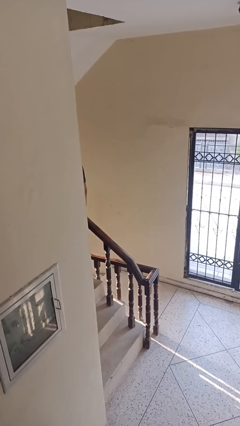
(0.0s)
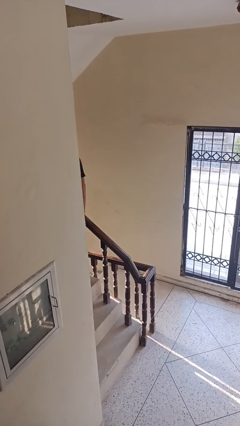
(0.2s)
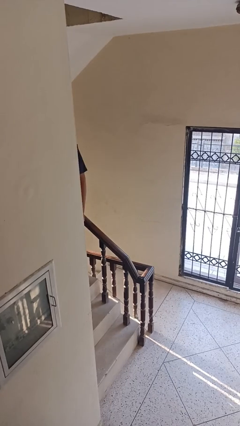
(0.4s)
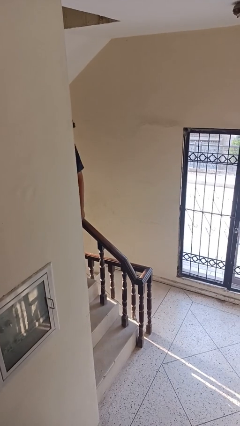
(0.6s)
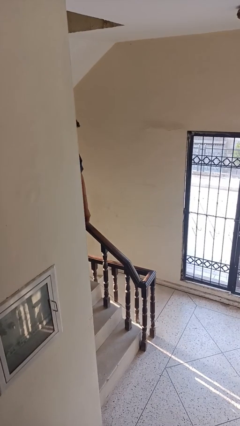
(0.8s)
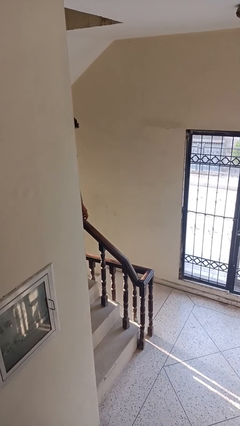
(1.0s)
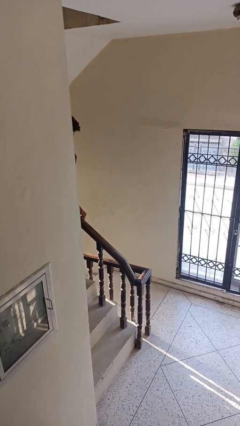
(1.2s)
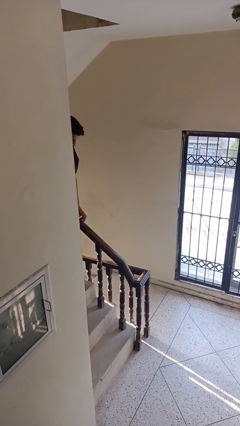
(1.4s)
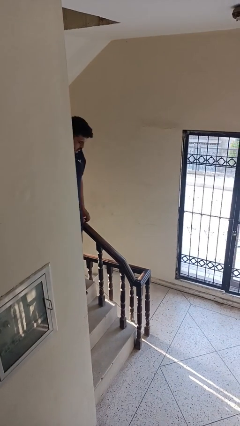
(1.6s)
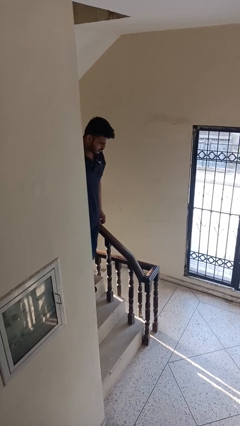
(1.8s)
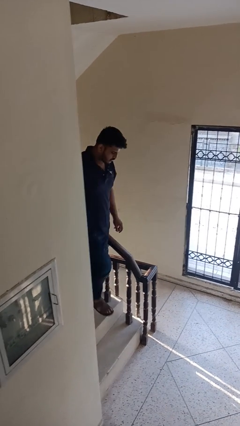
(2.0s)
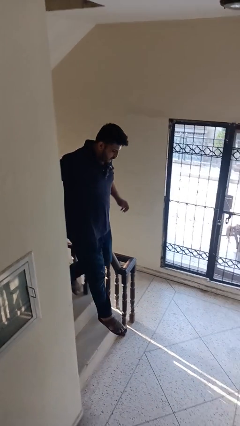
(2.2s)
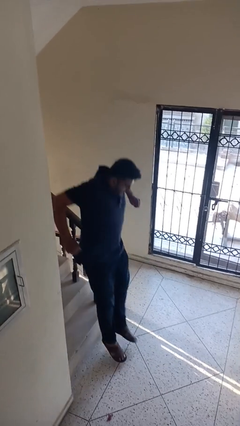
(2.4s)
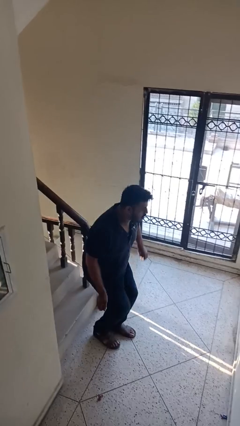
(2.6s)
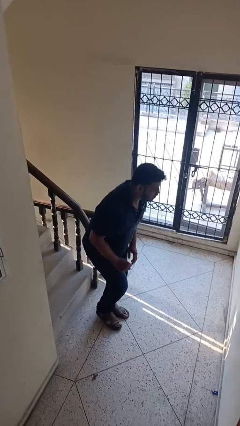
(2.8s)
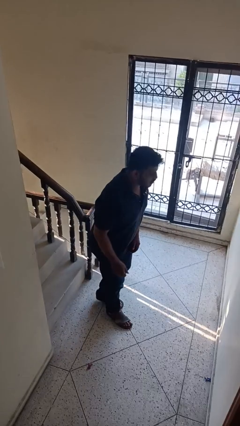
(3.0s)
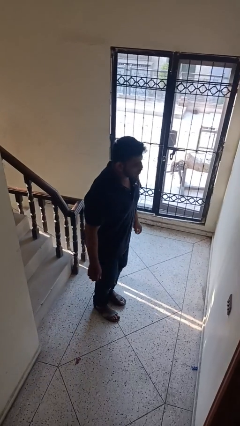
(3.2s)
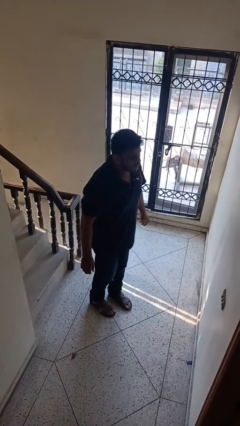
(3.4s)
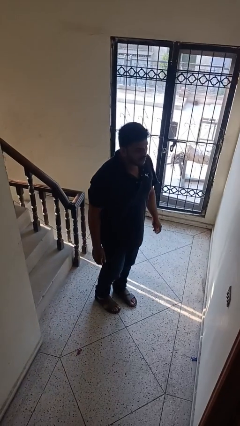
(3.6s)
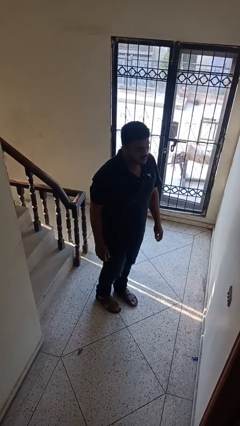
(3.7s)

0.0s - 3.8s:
person climbs down stairs

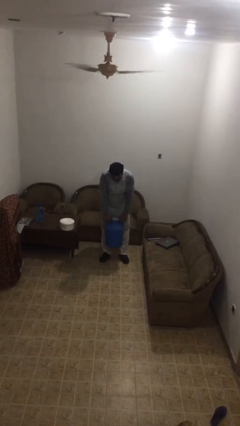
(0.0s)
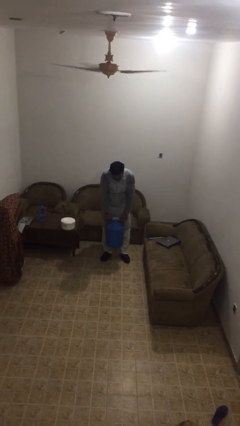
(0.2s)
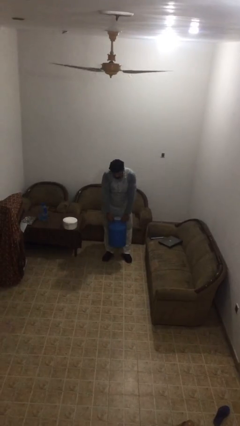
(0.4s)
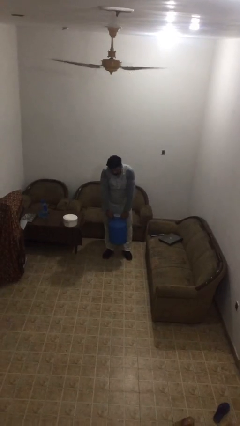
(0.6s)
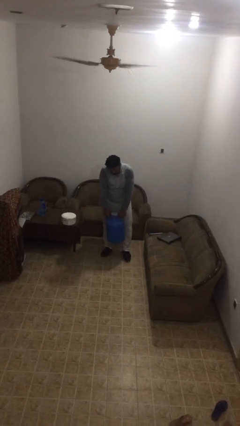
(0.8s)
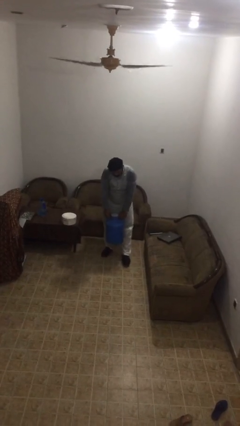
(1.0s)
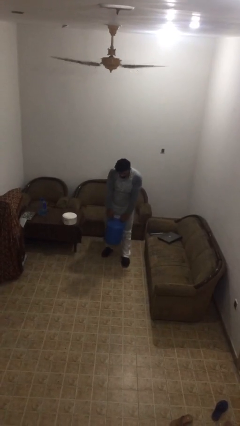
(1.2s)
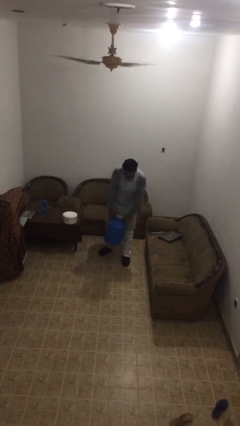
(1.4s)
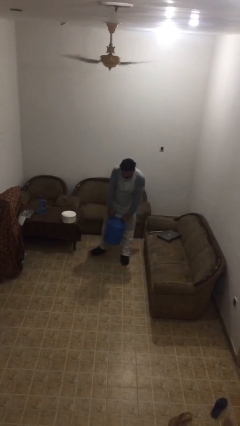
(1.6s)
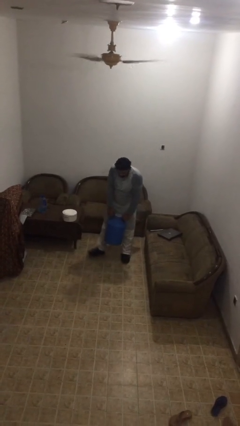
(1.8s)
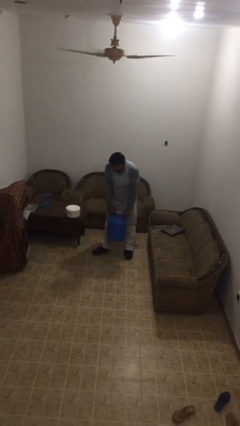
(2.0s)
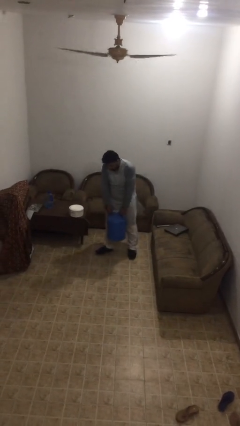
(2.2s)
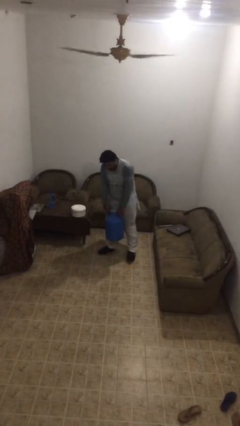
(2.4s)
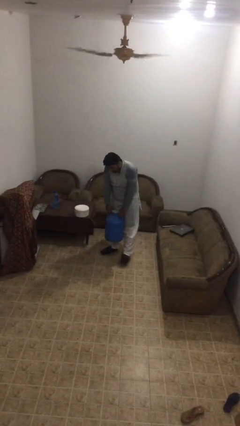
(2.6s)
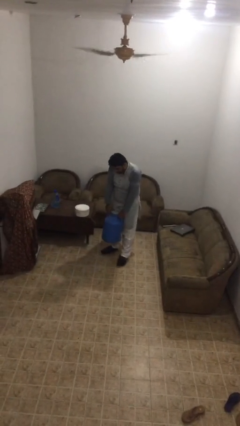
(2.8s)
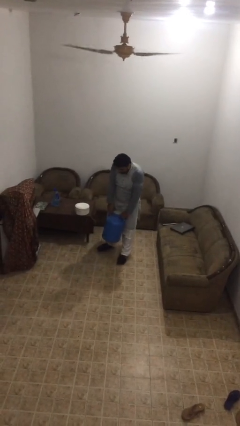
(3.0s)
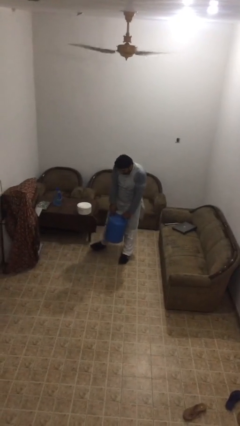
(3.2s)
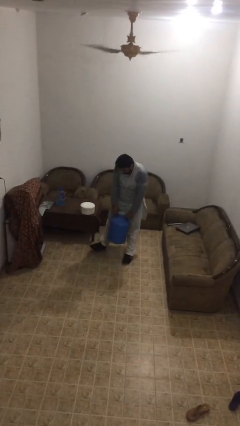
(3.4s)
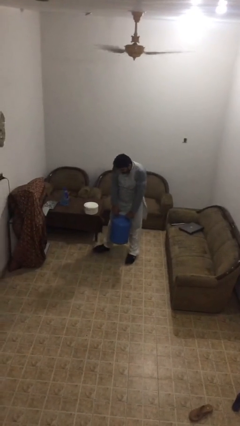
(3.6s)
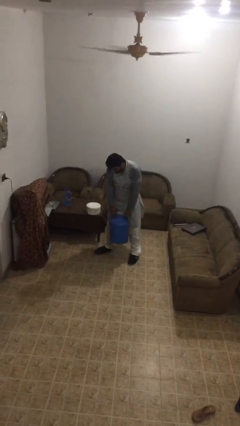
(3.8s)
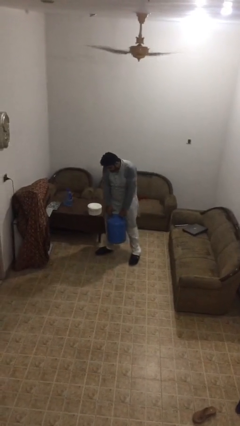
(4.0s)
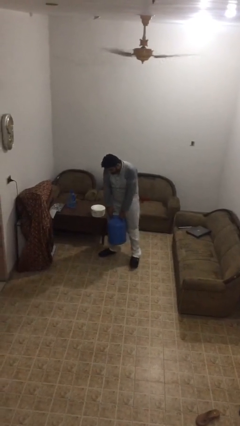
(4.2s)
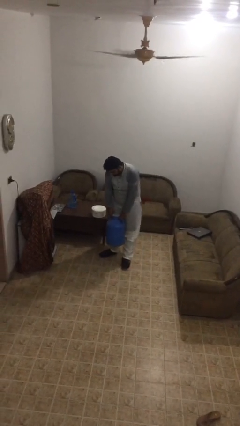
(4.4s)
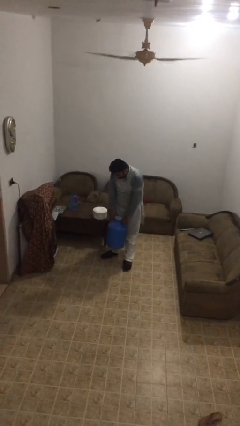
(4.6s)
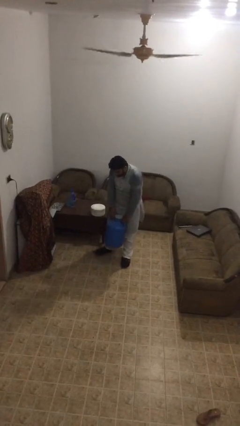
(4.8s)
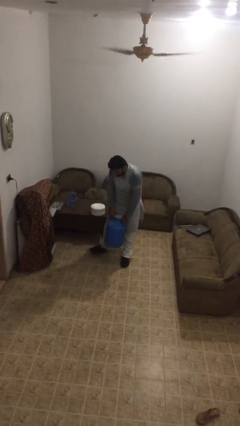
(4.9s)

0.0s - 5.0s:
person carries heavy object

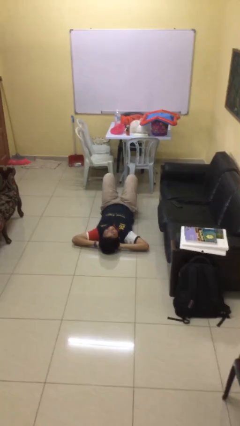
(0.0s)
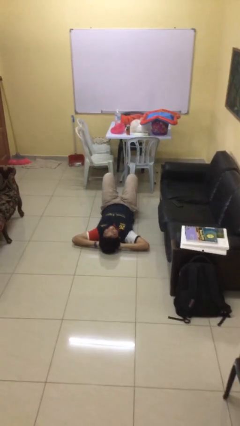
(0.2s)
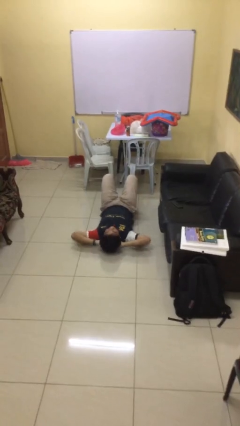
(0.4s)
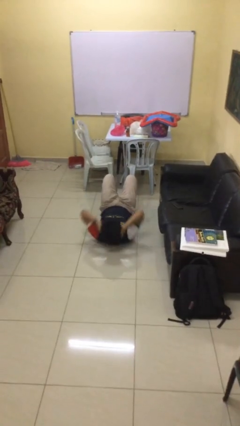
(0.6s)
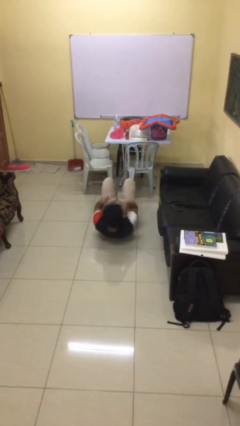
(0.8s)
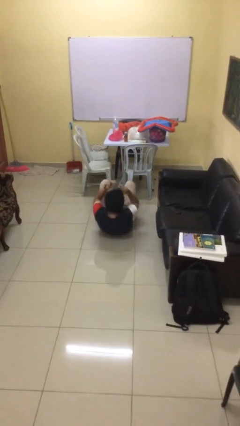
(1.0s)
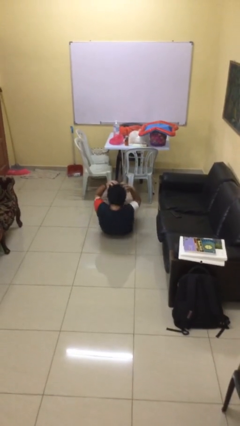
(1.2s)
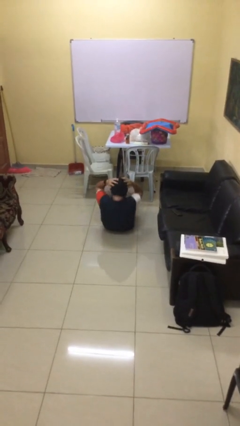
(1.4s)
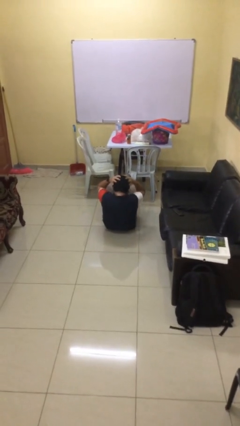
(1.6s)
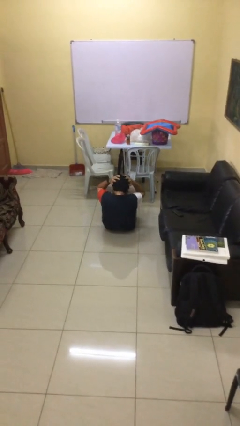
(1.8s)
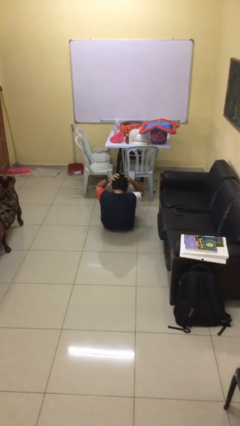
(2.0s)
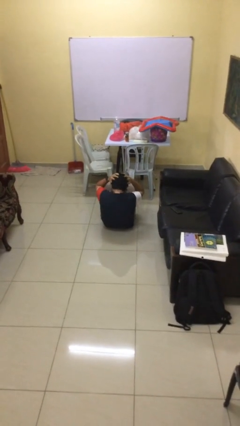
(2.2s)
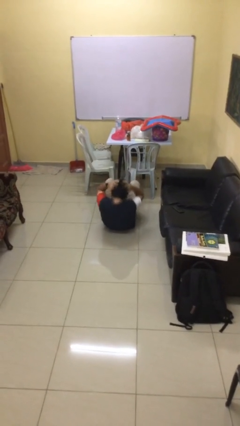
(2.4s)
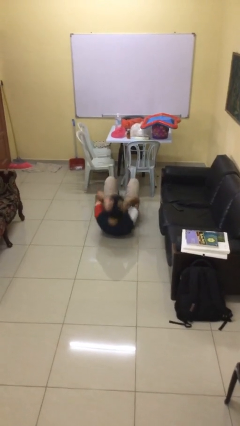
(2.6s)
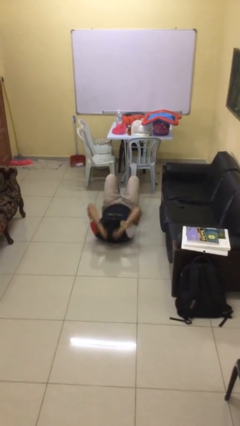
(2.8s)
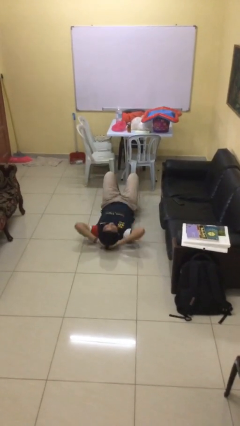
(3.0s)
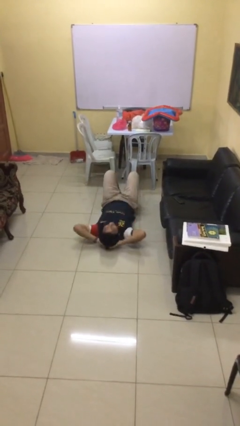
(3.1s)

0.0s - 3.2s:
person exercises with situp

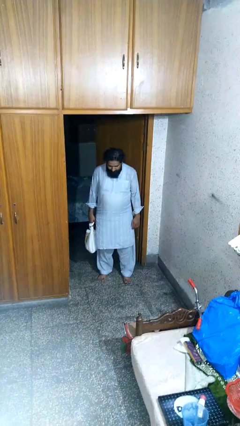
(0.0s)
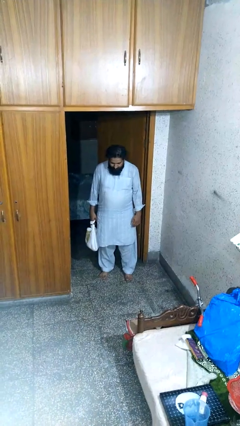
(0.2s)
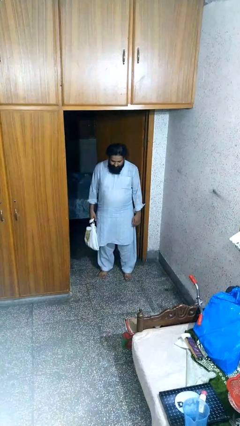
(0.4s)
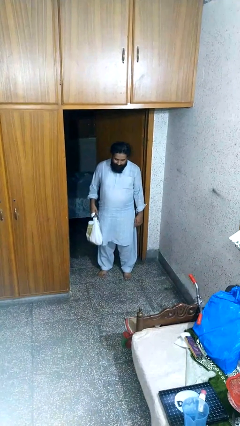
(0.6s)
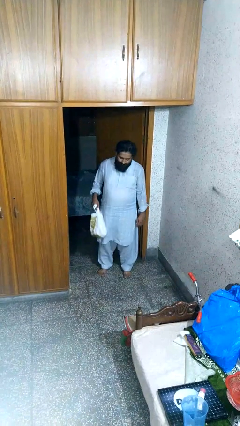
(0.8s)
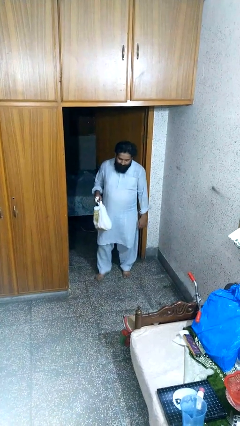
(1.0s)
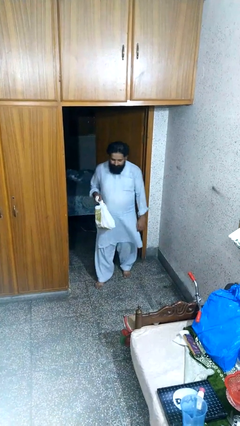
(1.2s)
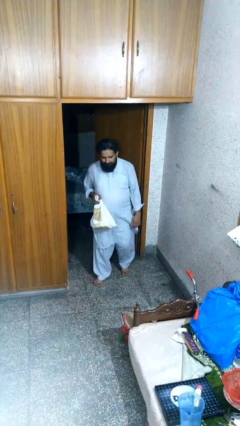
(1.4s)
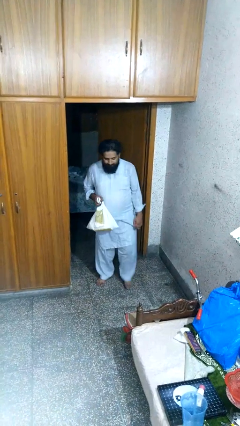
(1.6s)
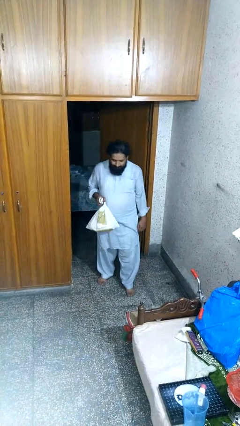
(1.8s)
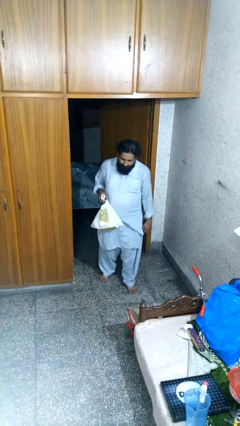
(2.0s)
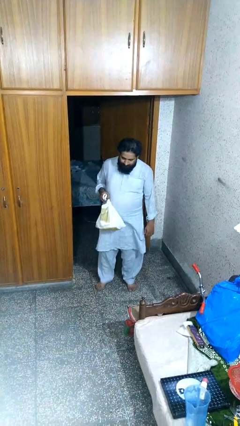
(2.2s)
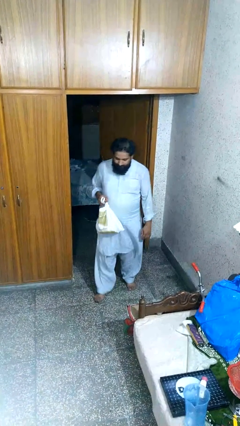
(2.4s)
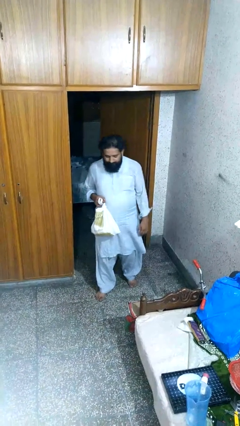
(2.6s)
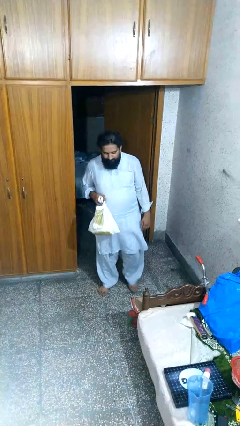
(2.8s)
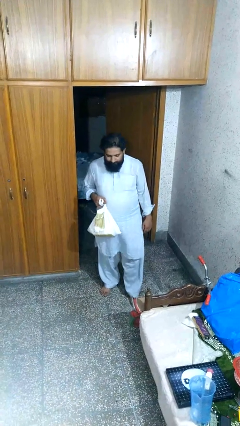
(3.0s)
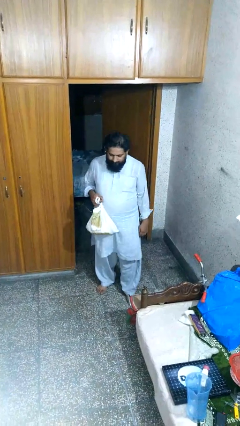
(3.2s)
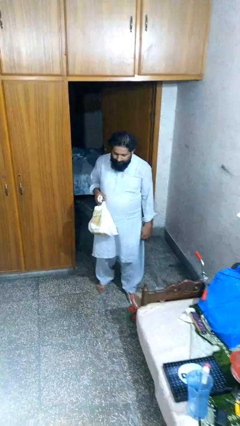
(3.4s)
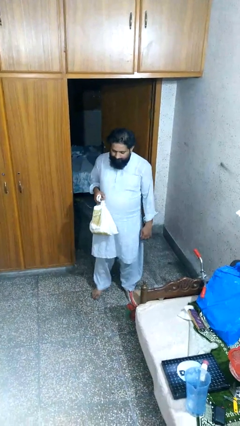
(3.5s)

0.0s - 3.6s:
person carries groceries

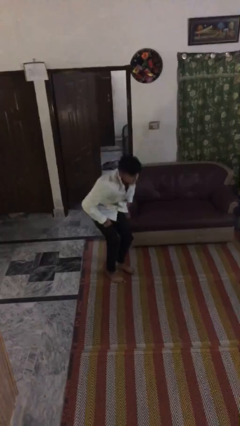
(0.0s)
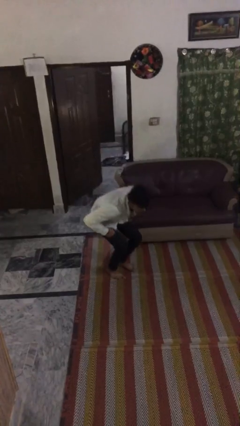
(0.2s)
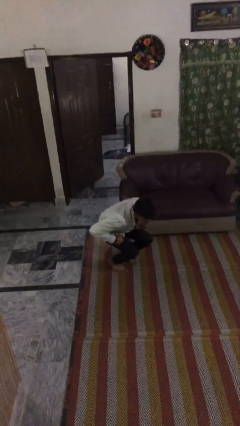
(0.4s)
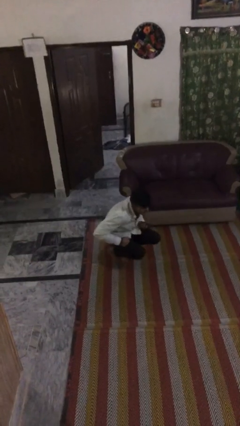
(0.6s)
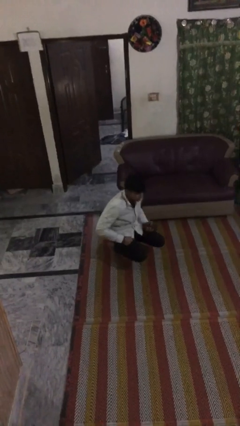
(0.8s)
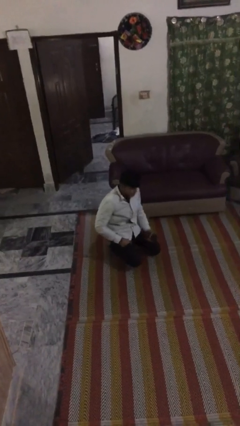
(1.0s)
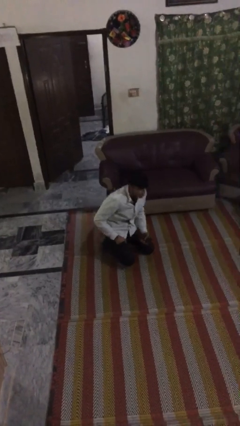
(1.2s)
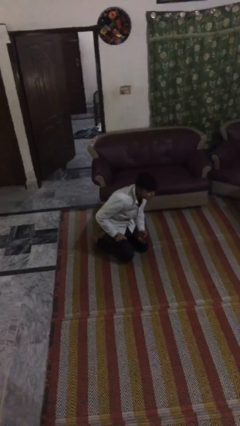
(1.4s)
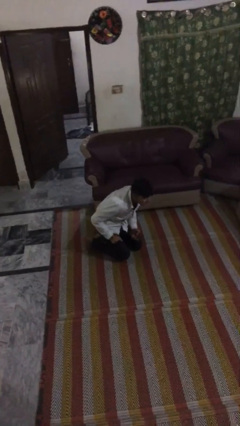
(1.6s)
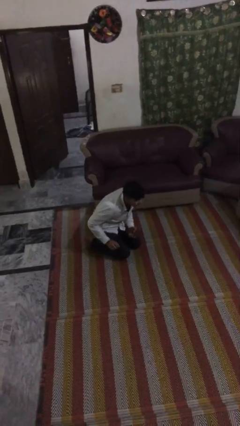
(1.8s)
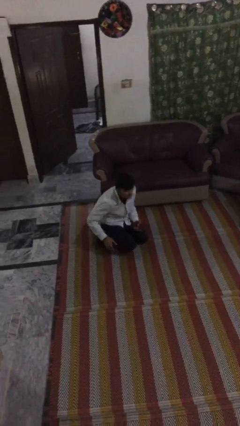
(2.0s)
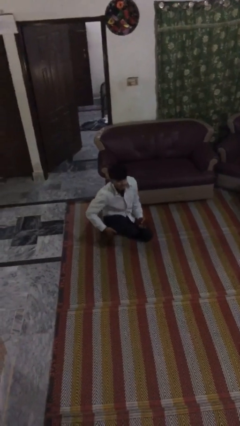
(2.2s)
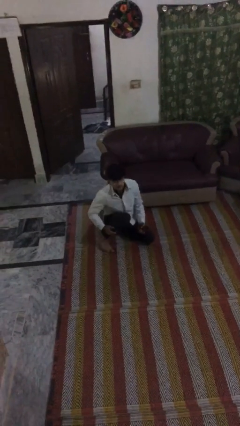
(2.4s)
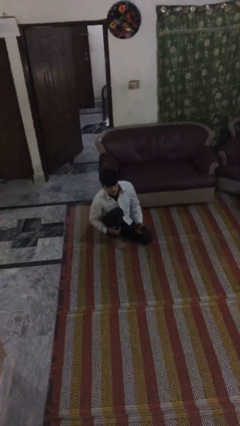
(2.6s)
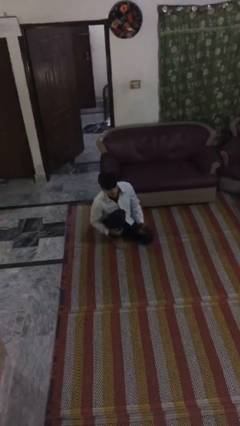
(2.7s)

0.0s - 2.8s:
person sits down
